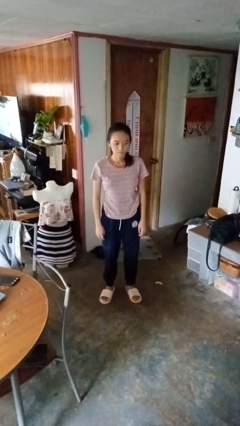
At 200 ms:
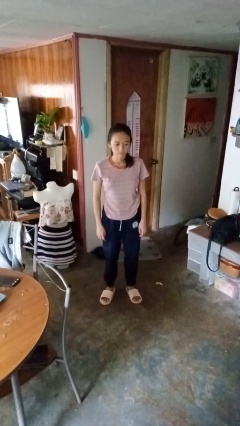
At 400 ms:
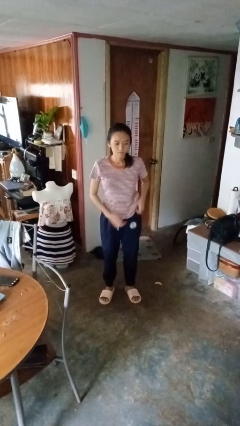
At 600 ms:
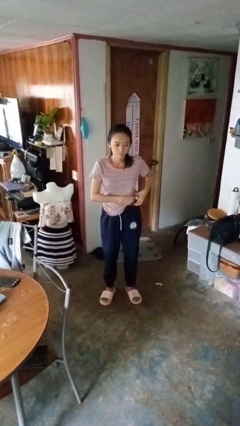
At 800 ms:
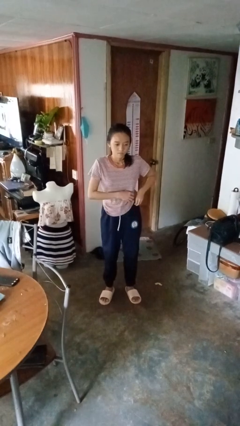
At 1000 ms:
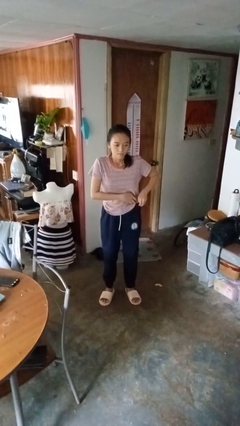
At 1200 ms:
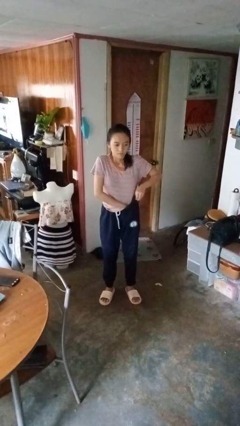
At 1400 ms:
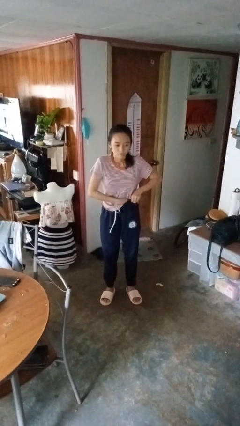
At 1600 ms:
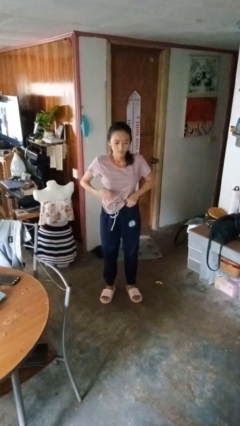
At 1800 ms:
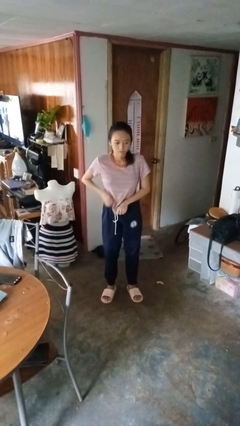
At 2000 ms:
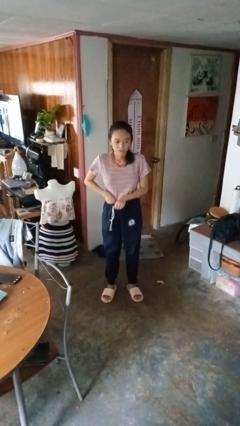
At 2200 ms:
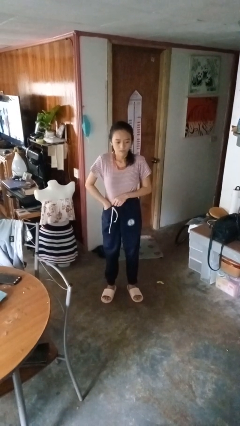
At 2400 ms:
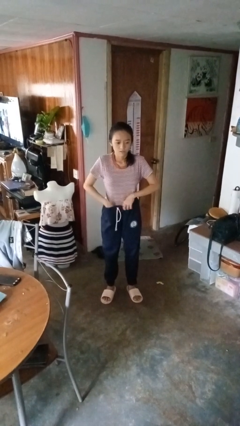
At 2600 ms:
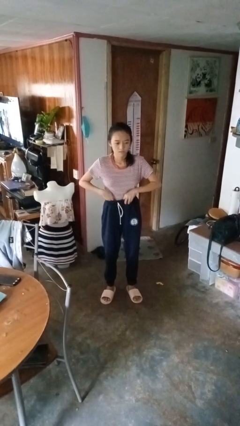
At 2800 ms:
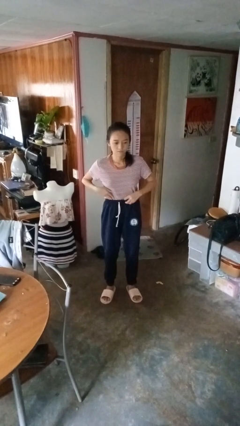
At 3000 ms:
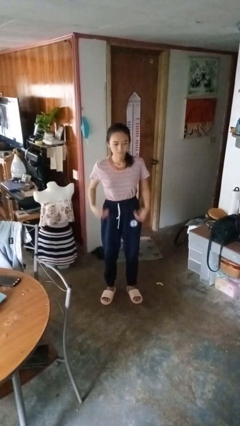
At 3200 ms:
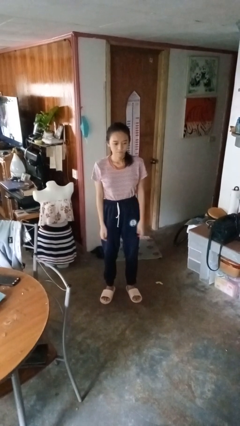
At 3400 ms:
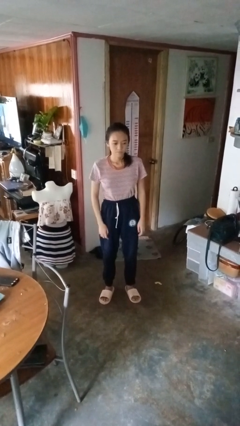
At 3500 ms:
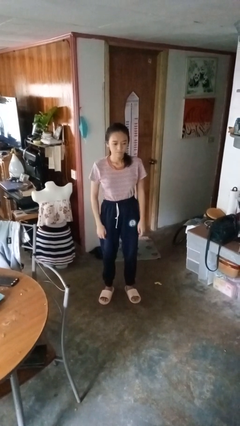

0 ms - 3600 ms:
person tucks in shirt

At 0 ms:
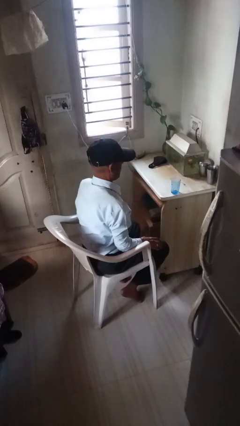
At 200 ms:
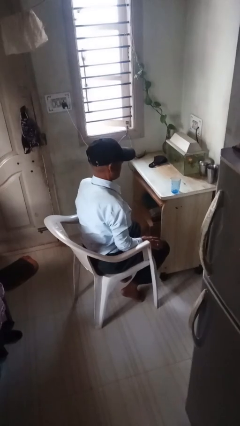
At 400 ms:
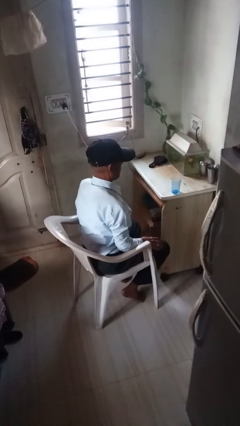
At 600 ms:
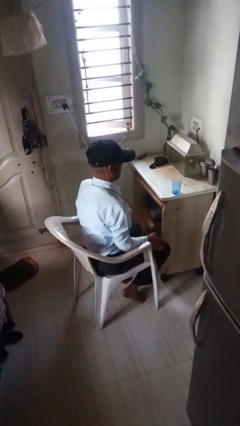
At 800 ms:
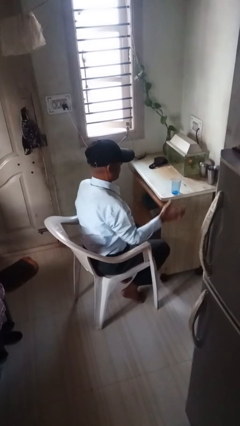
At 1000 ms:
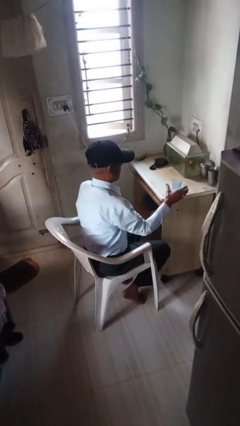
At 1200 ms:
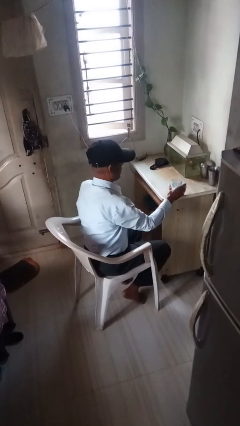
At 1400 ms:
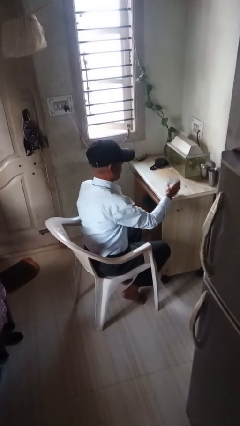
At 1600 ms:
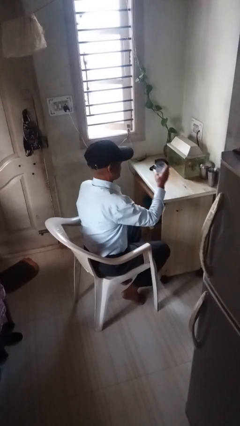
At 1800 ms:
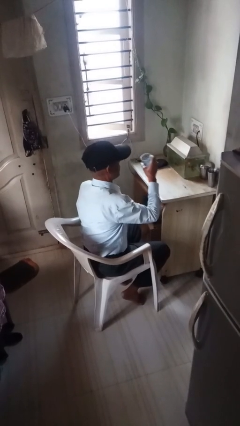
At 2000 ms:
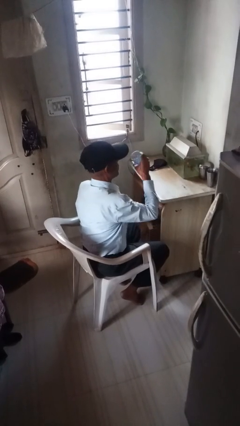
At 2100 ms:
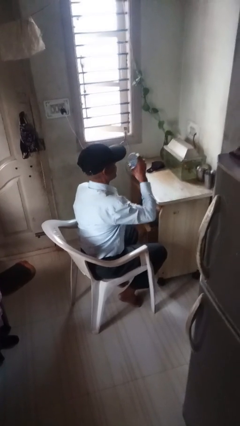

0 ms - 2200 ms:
person picks up object from table

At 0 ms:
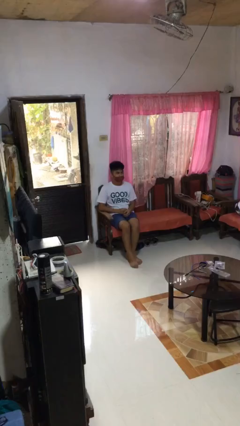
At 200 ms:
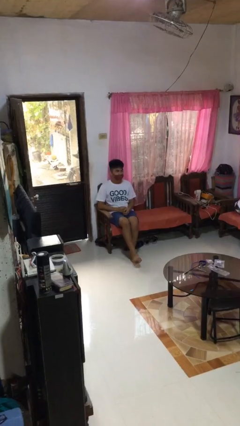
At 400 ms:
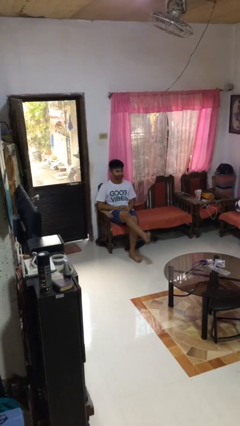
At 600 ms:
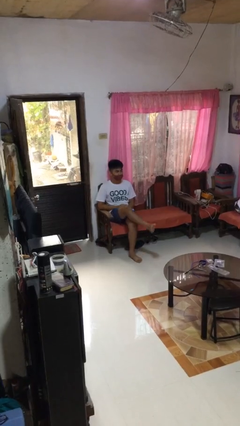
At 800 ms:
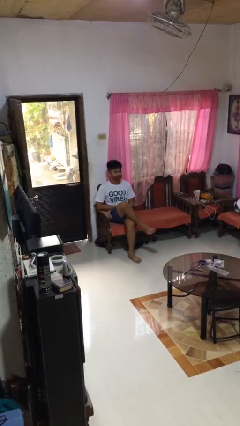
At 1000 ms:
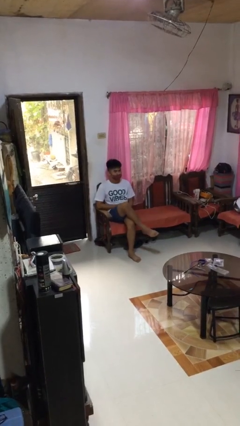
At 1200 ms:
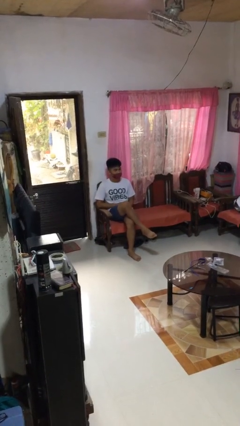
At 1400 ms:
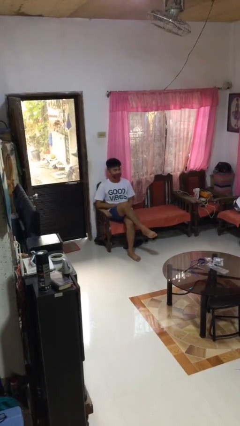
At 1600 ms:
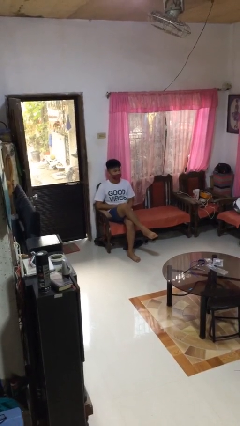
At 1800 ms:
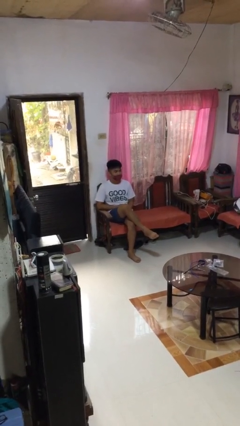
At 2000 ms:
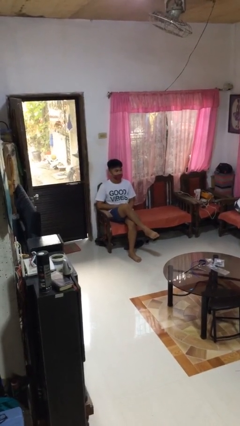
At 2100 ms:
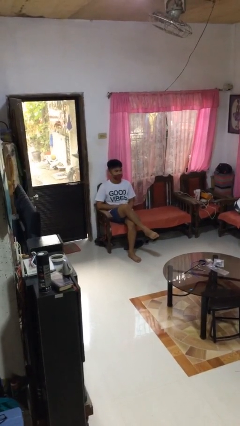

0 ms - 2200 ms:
person crosses legs

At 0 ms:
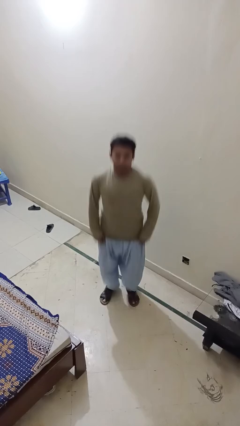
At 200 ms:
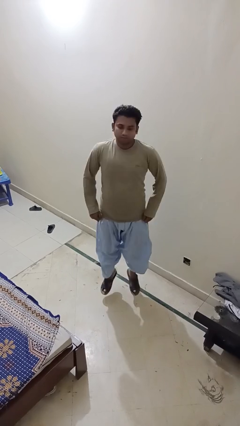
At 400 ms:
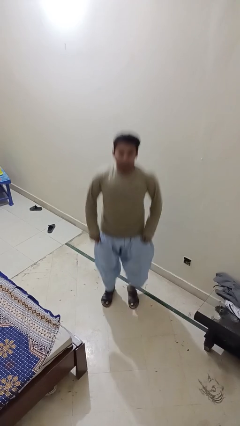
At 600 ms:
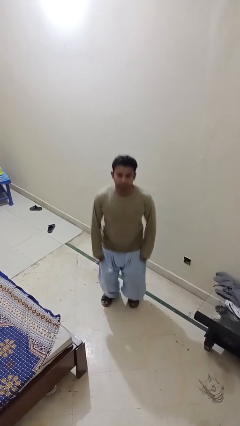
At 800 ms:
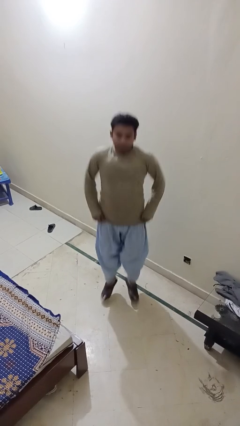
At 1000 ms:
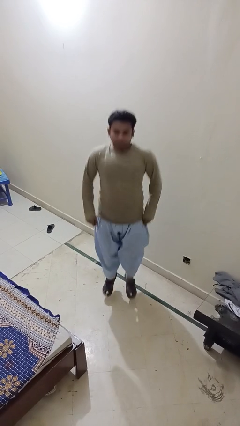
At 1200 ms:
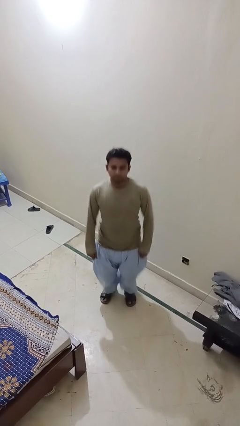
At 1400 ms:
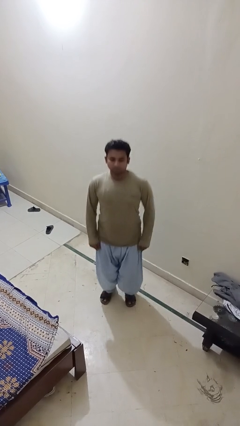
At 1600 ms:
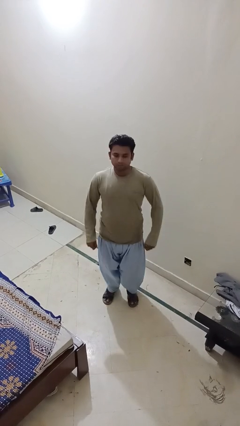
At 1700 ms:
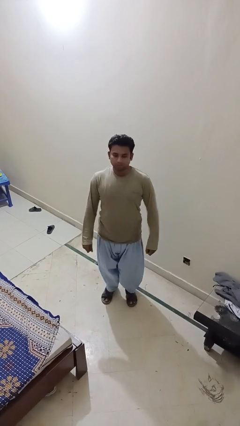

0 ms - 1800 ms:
person jumps

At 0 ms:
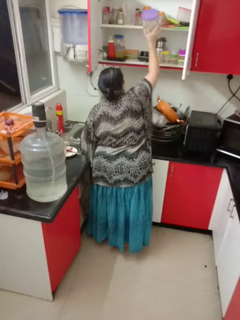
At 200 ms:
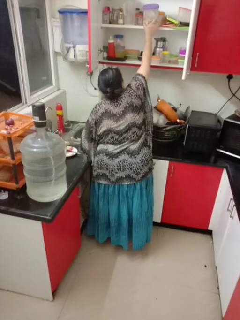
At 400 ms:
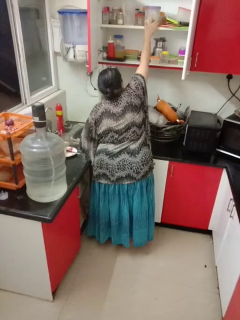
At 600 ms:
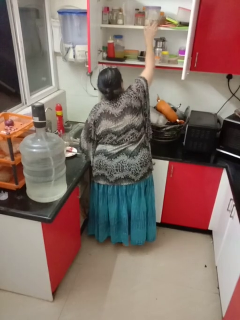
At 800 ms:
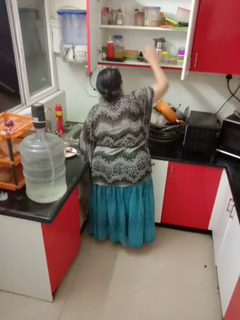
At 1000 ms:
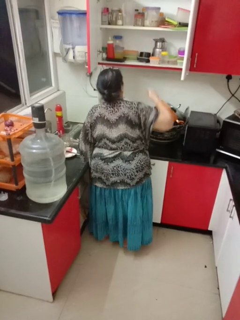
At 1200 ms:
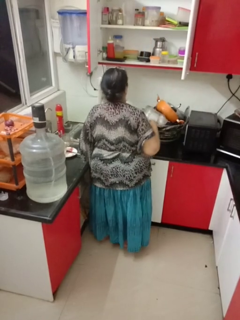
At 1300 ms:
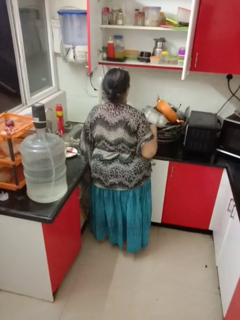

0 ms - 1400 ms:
person puts object in cabinet

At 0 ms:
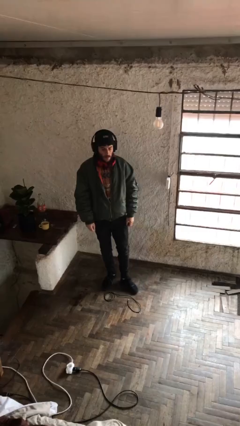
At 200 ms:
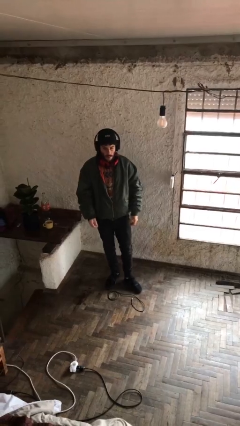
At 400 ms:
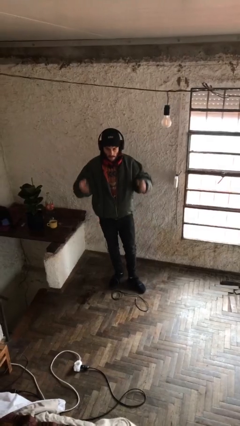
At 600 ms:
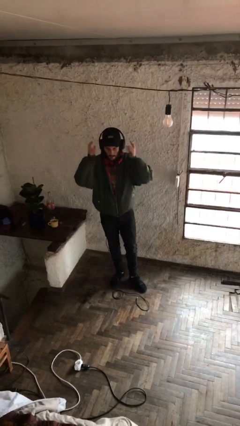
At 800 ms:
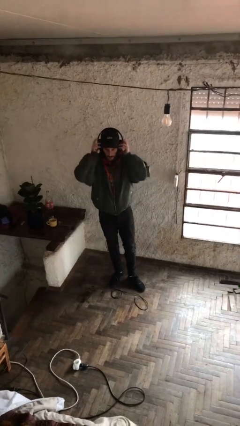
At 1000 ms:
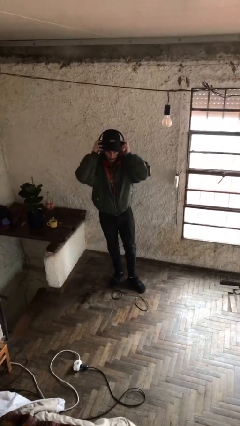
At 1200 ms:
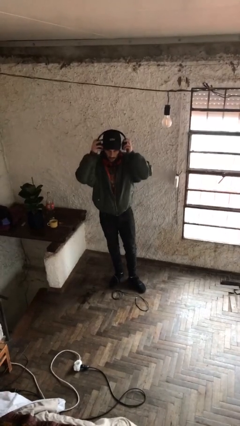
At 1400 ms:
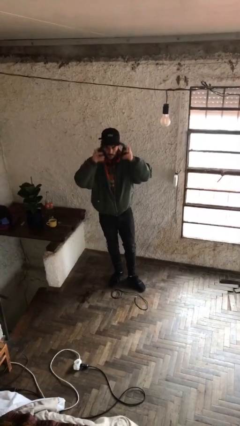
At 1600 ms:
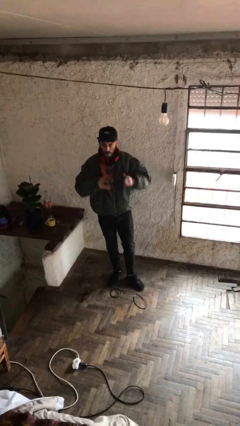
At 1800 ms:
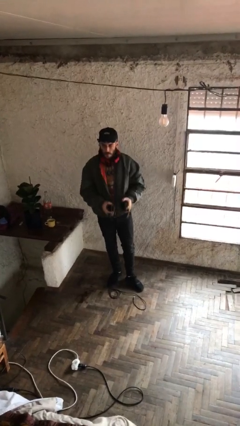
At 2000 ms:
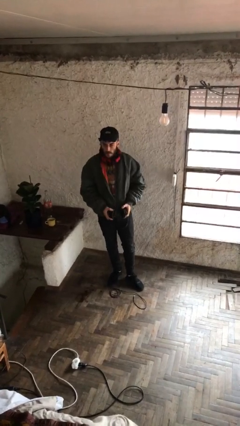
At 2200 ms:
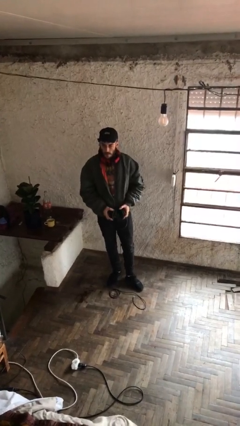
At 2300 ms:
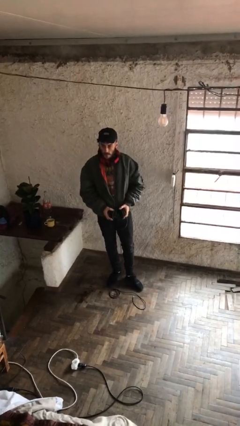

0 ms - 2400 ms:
person takes off headphones

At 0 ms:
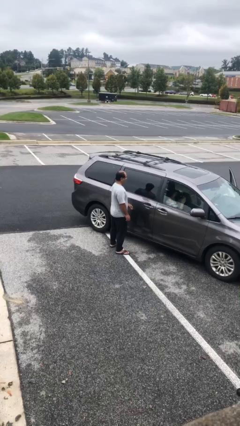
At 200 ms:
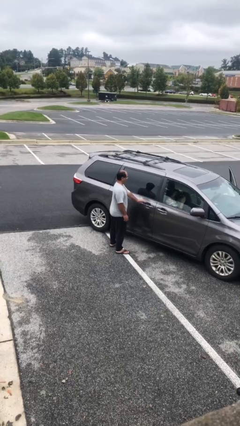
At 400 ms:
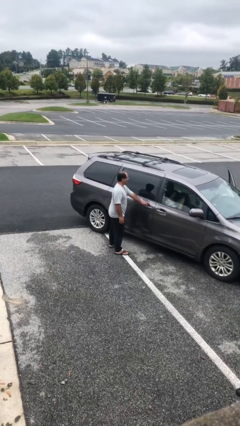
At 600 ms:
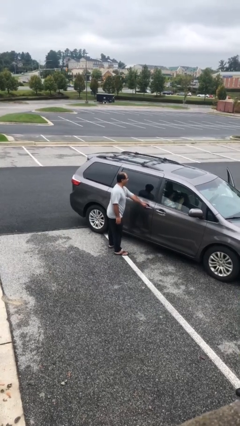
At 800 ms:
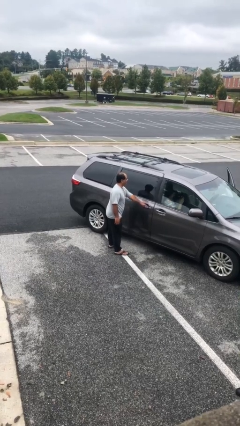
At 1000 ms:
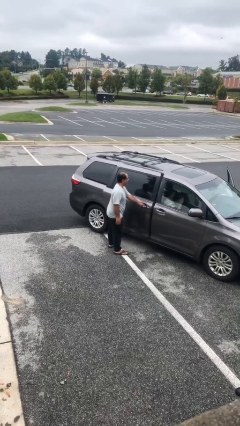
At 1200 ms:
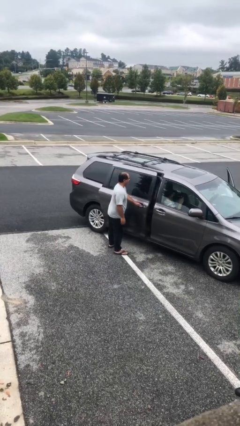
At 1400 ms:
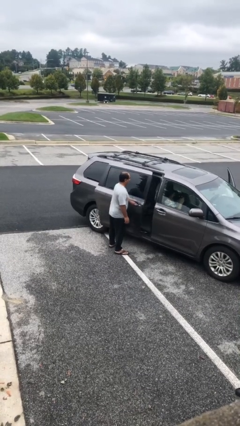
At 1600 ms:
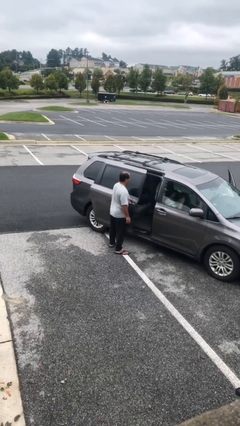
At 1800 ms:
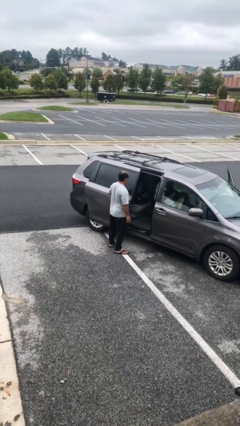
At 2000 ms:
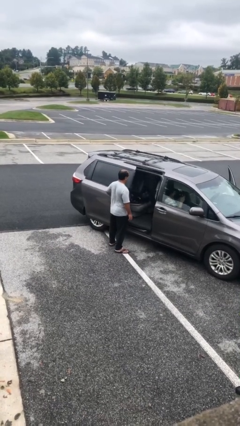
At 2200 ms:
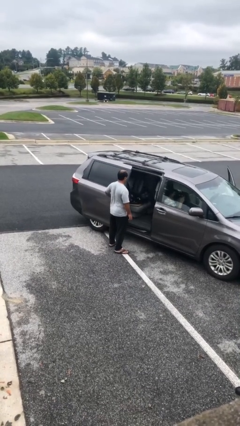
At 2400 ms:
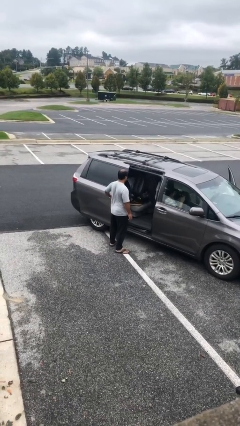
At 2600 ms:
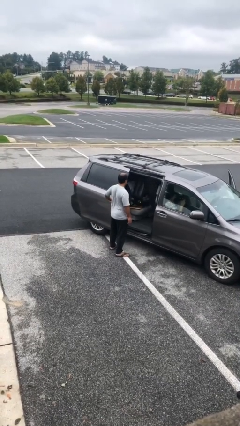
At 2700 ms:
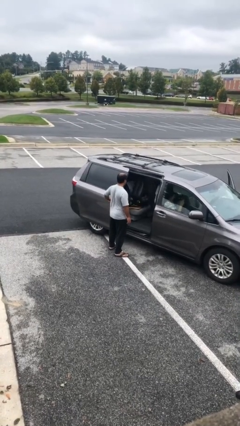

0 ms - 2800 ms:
person opens car door

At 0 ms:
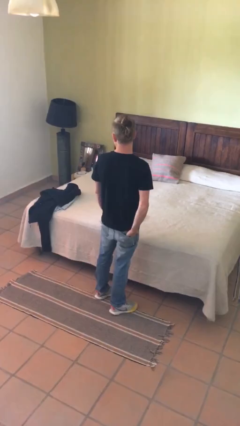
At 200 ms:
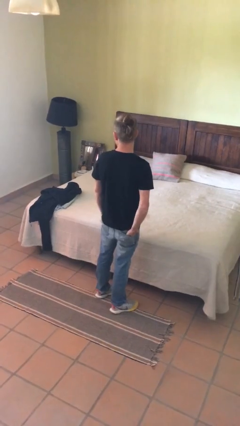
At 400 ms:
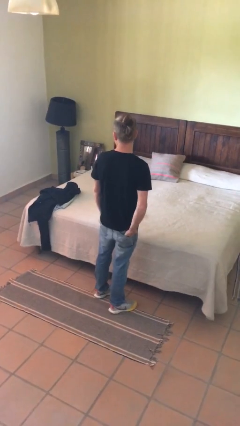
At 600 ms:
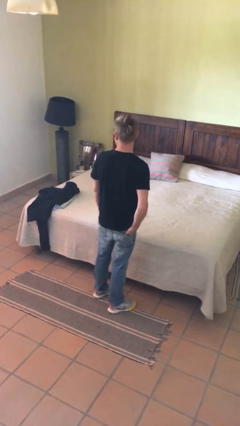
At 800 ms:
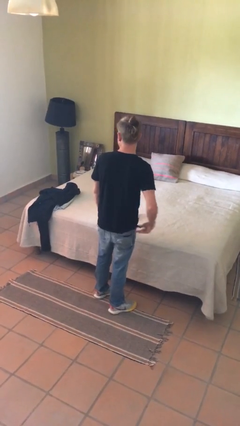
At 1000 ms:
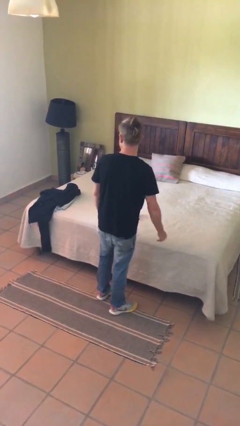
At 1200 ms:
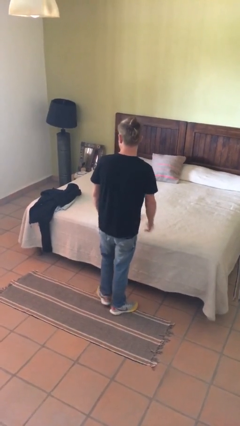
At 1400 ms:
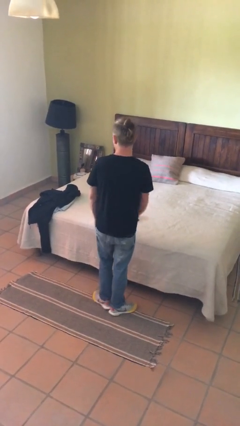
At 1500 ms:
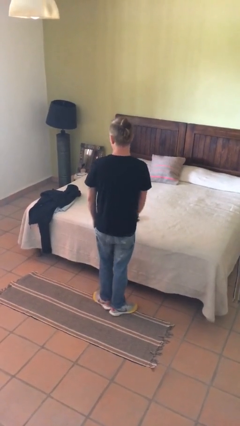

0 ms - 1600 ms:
person puts hands in back pockets
